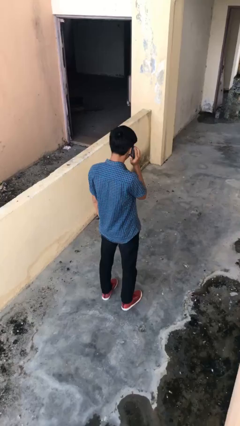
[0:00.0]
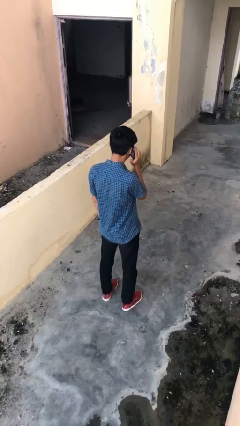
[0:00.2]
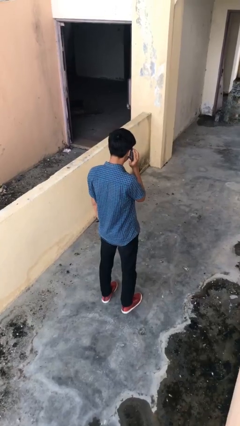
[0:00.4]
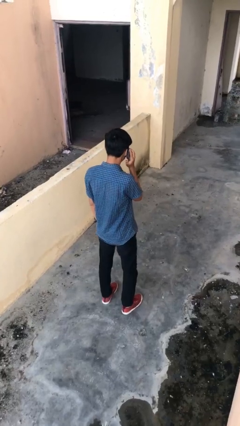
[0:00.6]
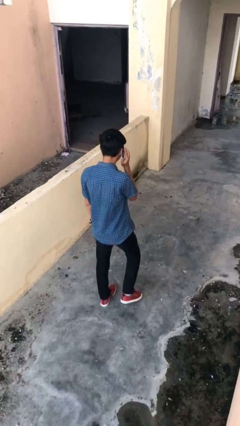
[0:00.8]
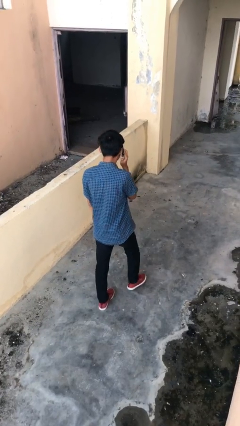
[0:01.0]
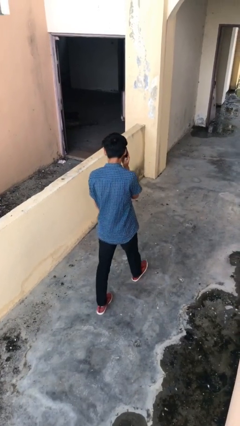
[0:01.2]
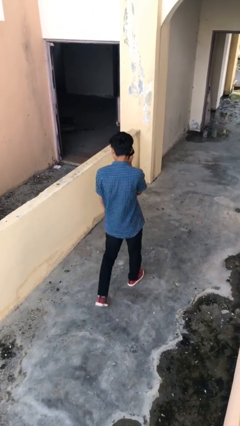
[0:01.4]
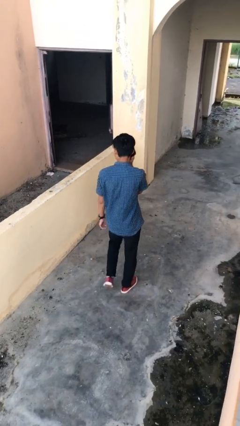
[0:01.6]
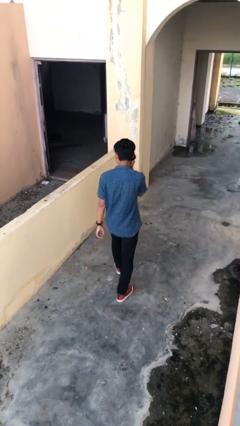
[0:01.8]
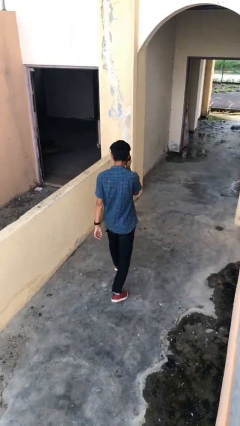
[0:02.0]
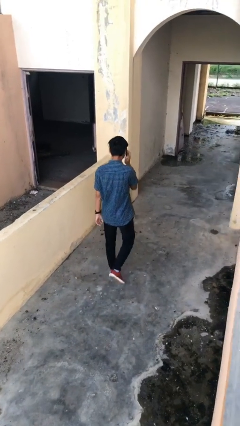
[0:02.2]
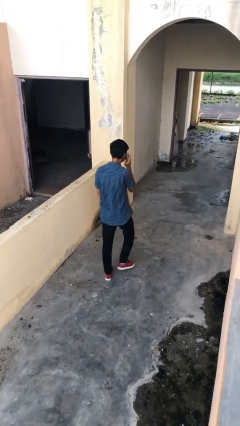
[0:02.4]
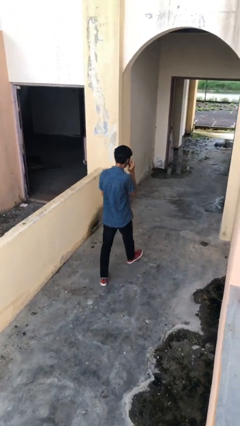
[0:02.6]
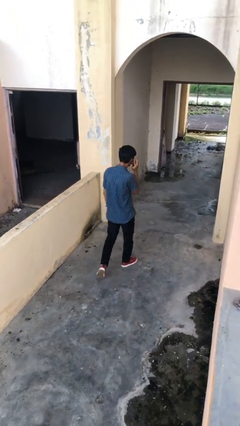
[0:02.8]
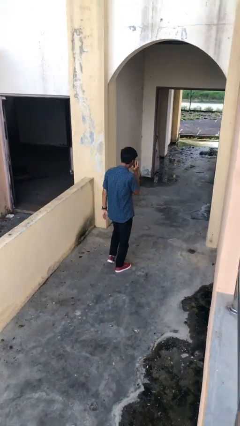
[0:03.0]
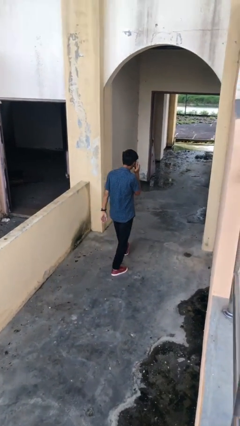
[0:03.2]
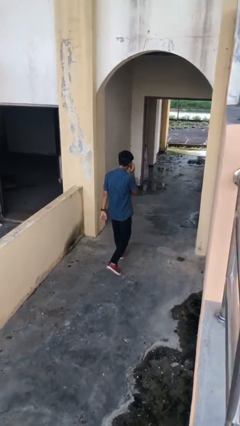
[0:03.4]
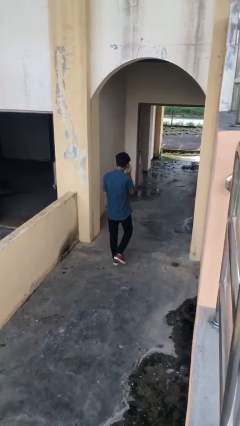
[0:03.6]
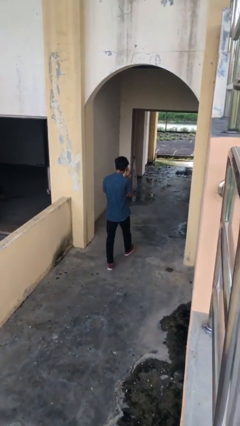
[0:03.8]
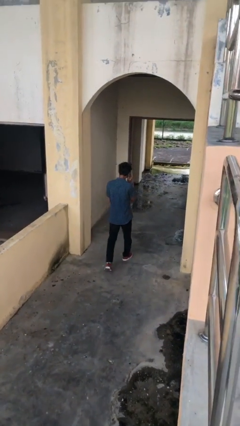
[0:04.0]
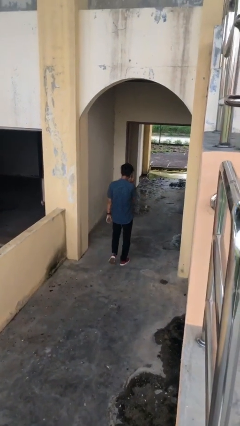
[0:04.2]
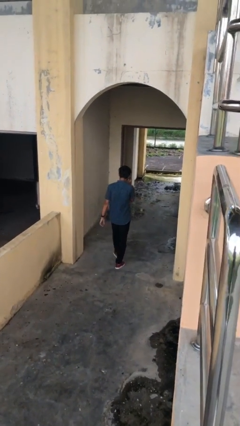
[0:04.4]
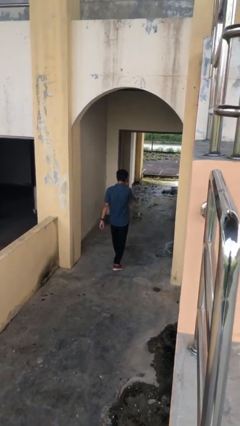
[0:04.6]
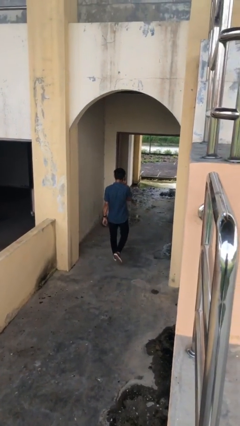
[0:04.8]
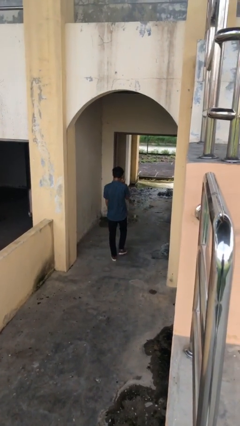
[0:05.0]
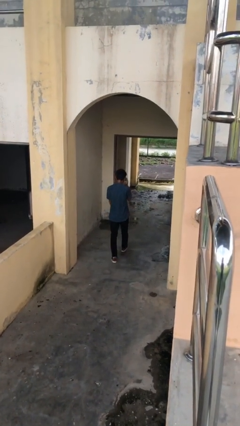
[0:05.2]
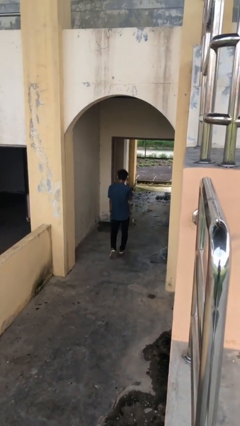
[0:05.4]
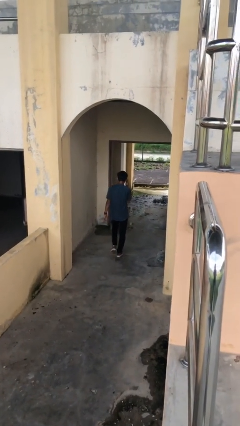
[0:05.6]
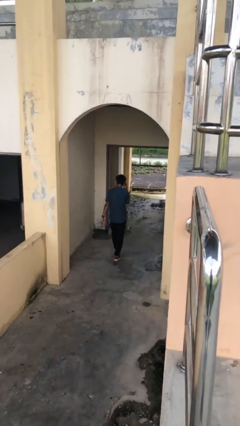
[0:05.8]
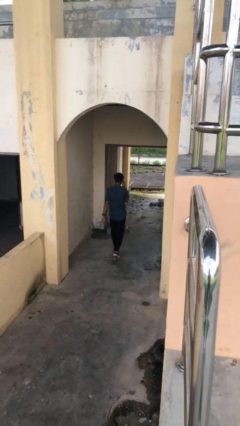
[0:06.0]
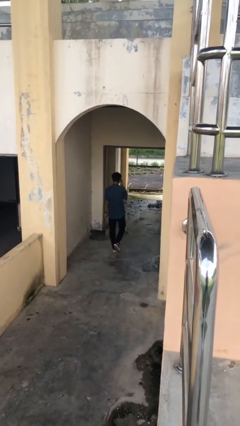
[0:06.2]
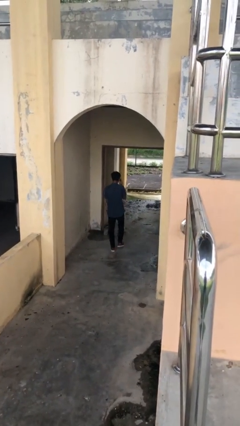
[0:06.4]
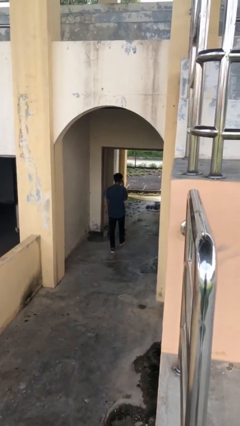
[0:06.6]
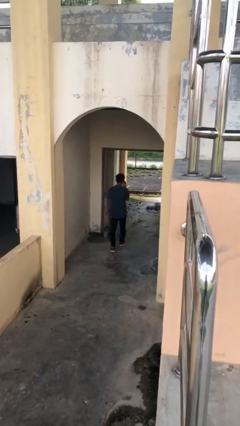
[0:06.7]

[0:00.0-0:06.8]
person exits scene through structure

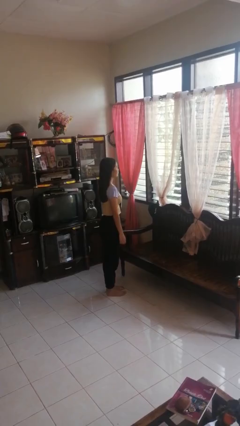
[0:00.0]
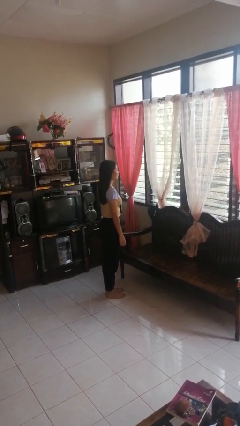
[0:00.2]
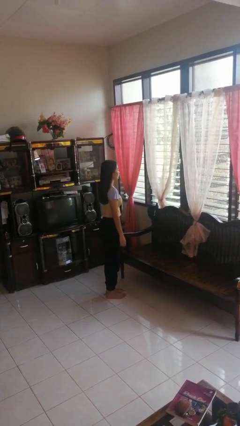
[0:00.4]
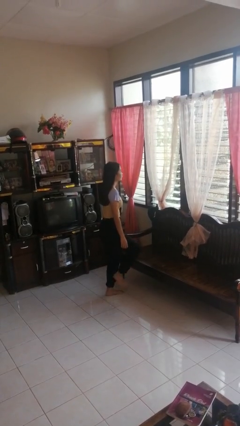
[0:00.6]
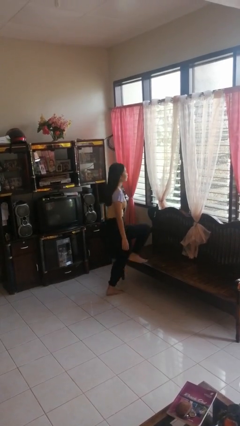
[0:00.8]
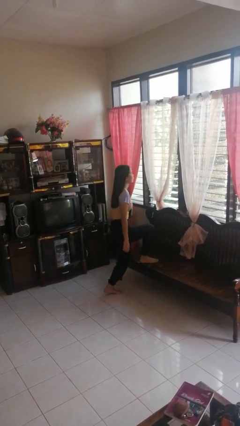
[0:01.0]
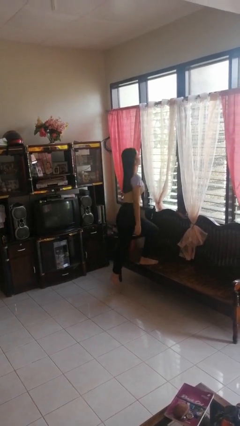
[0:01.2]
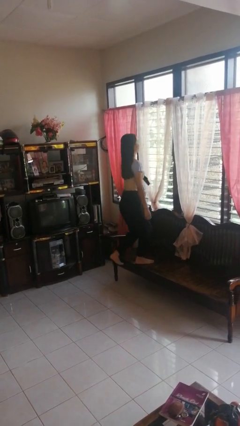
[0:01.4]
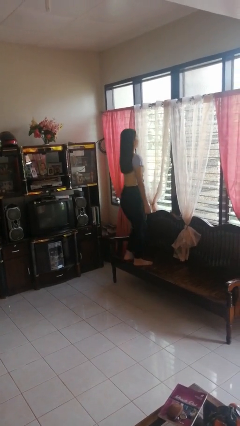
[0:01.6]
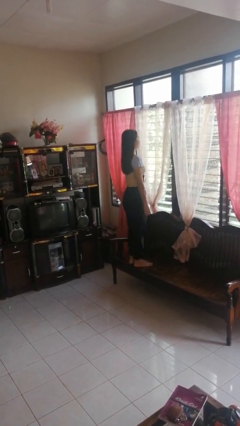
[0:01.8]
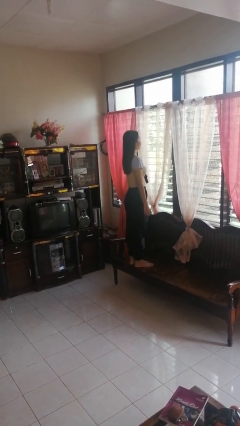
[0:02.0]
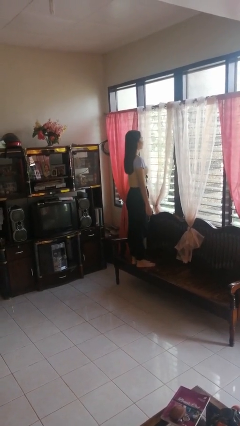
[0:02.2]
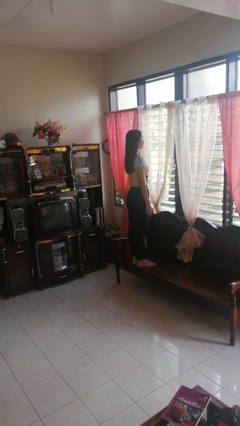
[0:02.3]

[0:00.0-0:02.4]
person climbs on couch

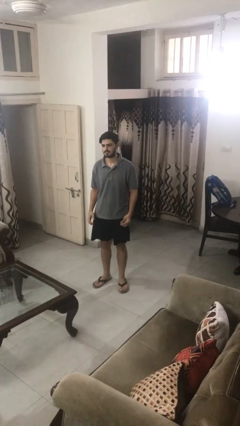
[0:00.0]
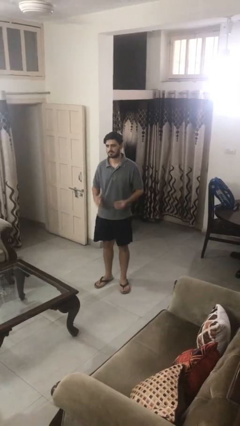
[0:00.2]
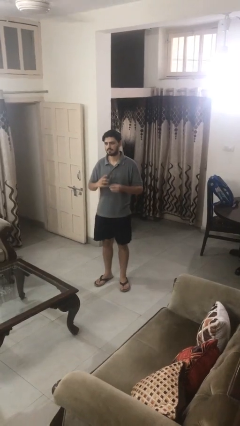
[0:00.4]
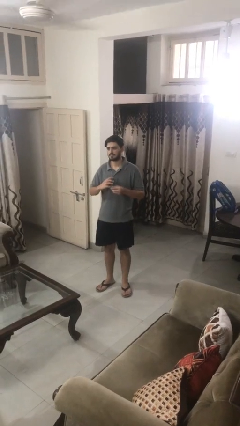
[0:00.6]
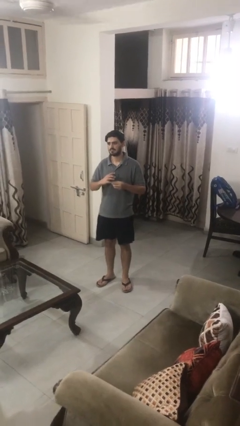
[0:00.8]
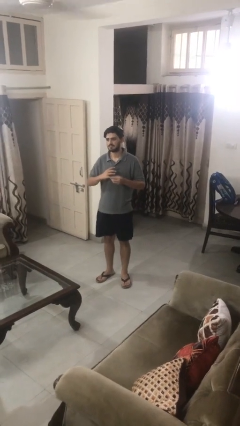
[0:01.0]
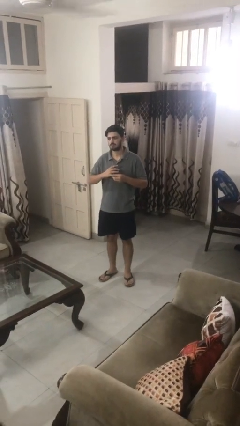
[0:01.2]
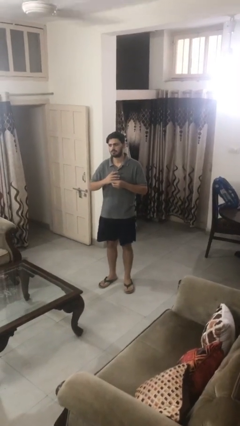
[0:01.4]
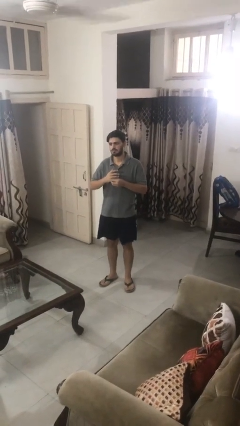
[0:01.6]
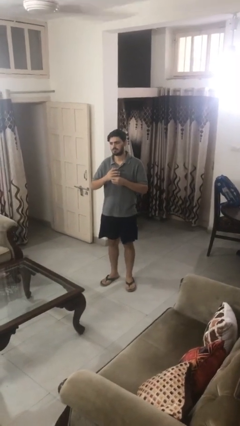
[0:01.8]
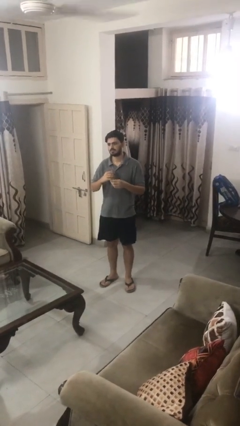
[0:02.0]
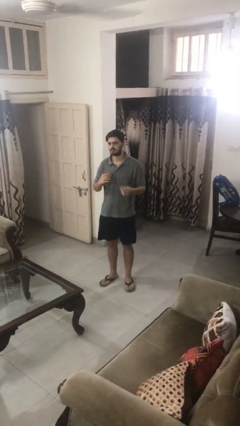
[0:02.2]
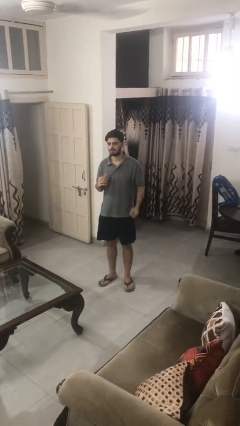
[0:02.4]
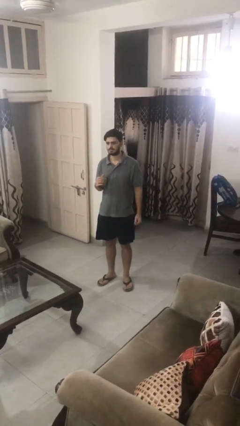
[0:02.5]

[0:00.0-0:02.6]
person puts on ring

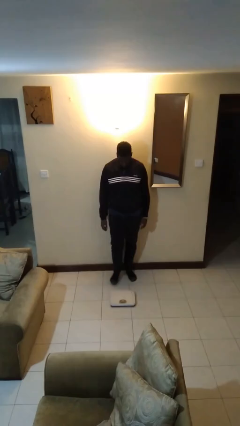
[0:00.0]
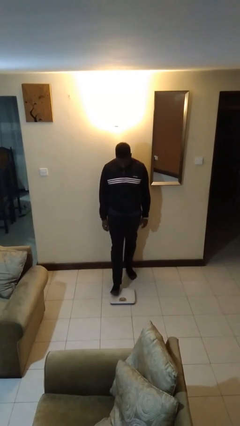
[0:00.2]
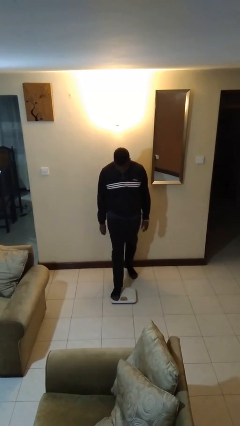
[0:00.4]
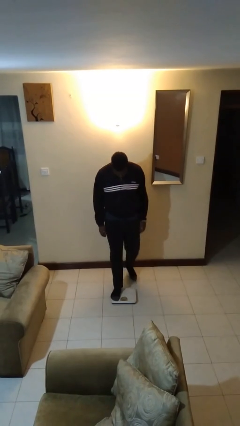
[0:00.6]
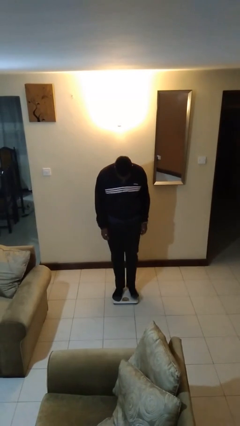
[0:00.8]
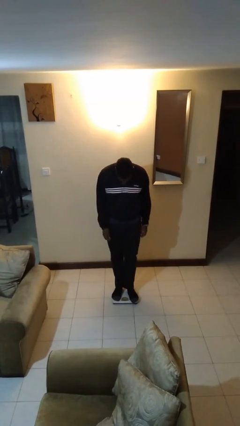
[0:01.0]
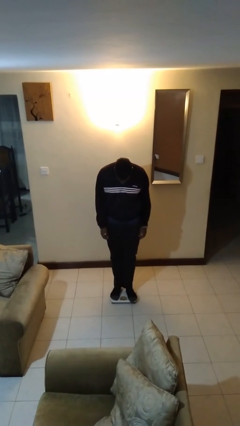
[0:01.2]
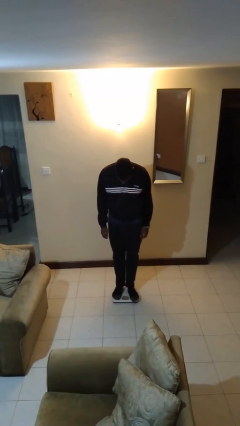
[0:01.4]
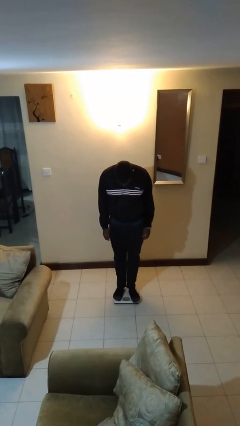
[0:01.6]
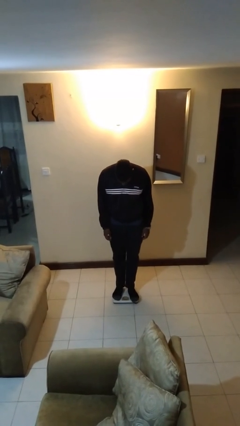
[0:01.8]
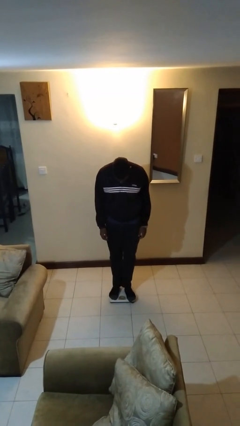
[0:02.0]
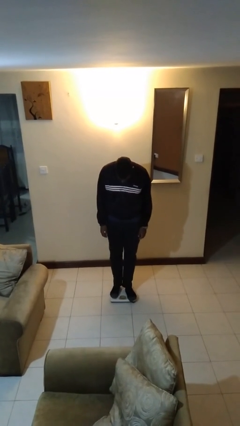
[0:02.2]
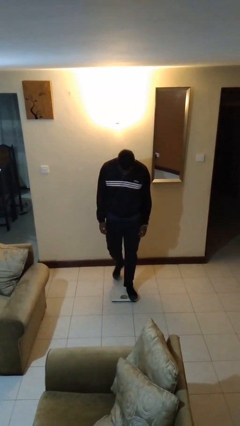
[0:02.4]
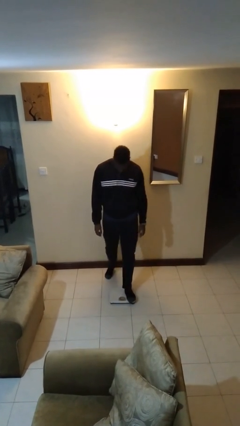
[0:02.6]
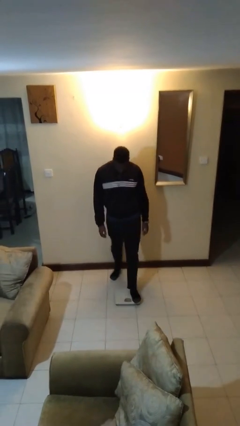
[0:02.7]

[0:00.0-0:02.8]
person uses bodyweight scale

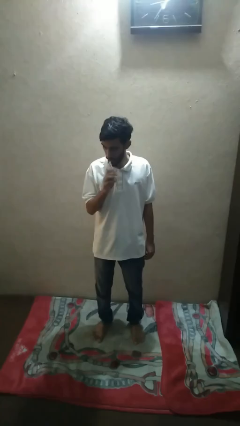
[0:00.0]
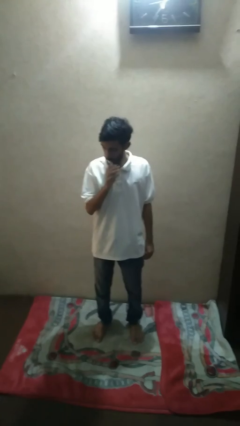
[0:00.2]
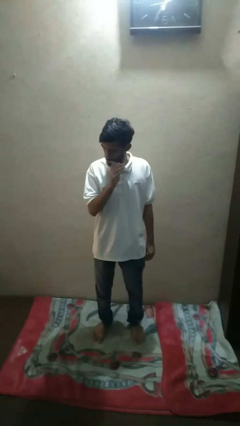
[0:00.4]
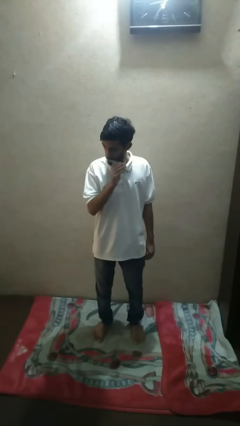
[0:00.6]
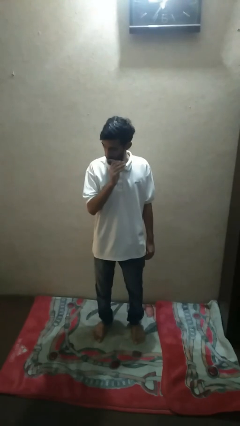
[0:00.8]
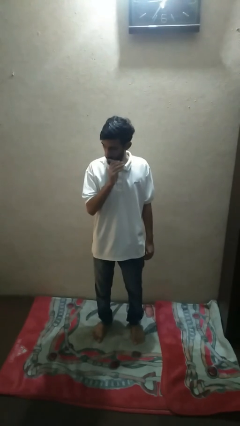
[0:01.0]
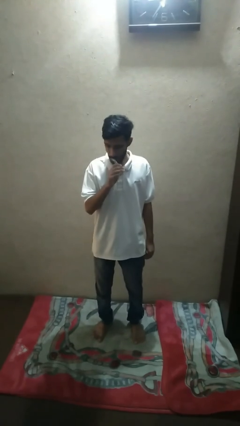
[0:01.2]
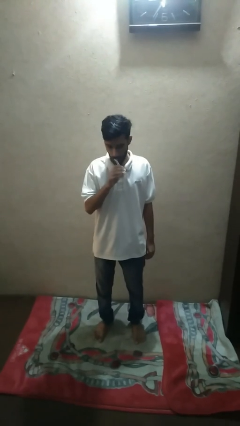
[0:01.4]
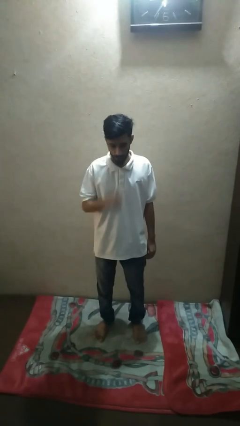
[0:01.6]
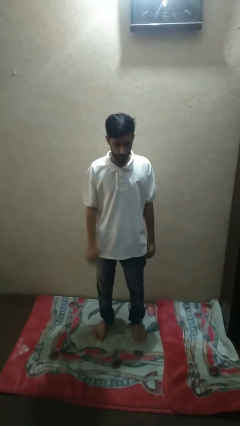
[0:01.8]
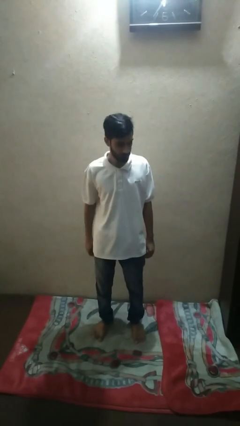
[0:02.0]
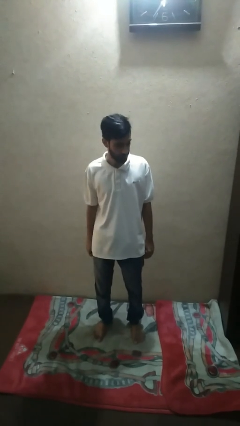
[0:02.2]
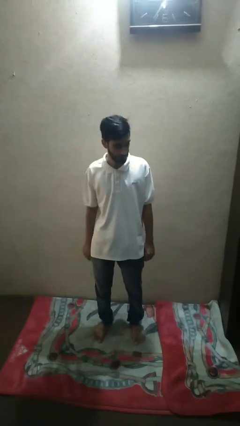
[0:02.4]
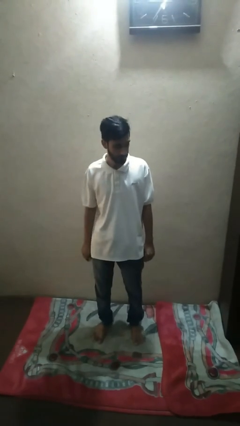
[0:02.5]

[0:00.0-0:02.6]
person brushes teeth

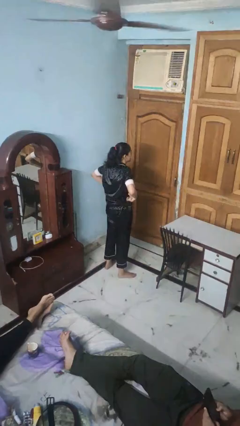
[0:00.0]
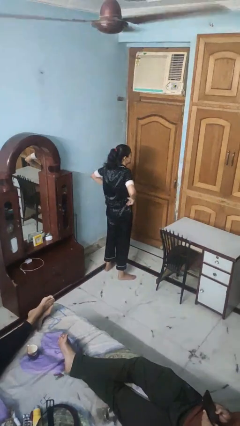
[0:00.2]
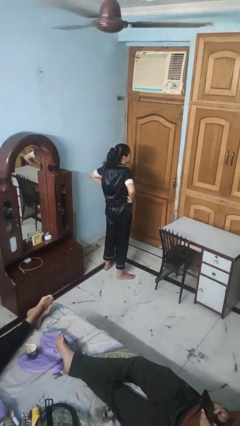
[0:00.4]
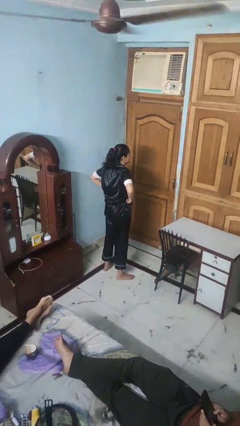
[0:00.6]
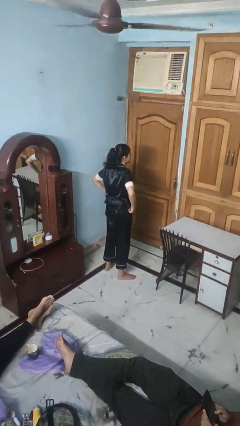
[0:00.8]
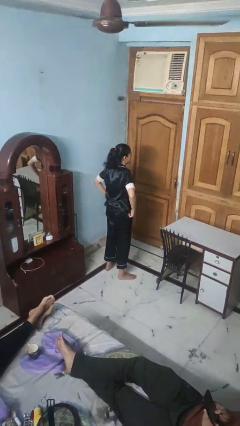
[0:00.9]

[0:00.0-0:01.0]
person hikes up pants
